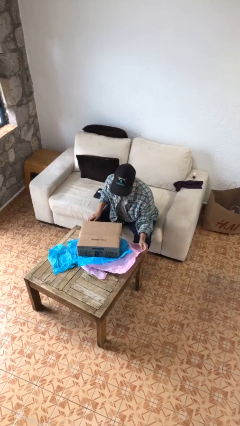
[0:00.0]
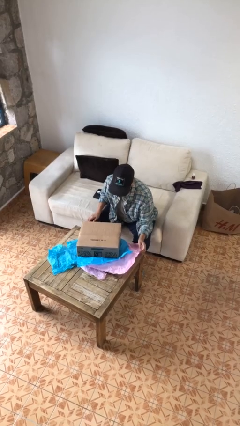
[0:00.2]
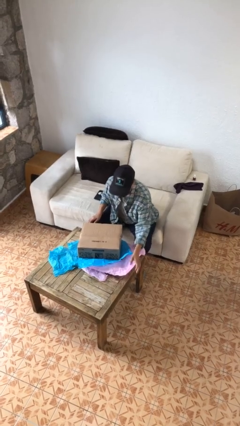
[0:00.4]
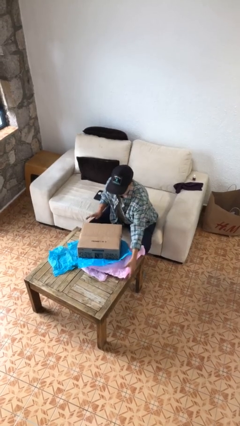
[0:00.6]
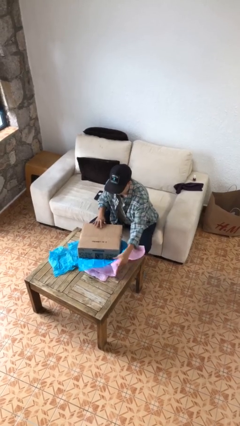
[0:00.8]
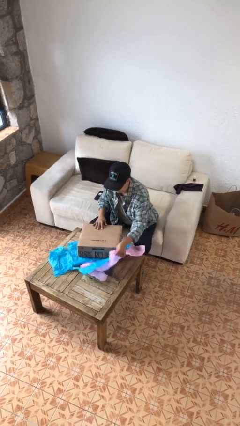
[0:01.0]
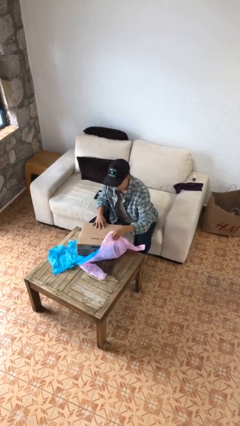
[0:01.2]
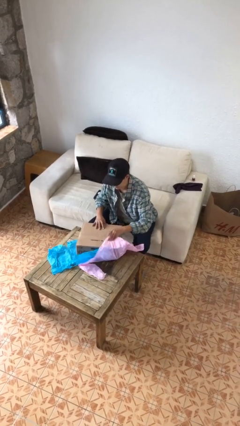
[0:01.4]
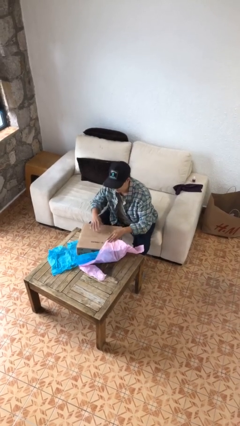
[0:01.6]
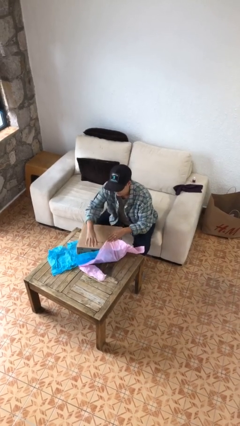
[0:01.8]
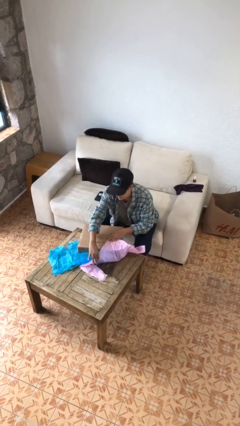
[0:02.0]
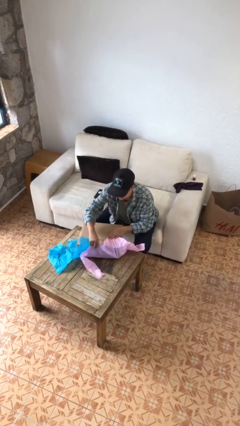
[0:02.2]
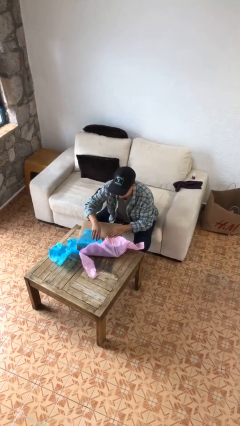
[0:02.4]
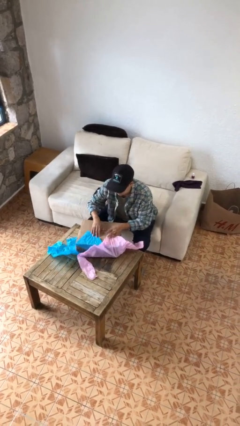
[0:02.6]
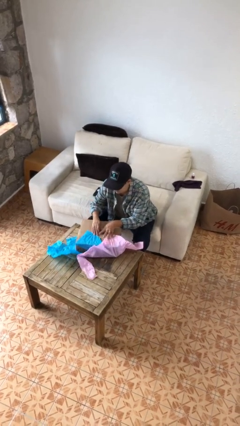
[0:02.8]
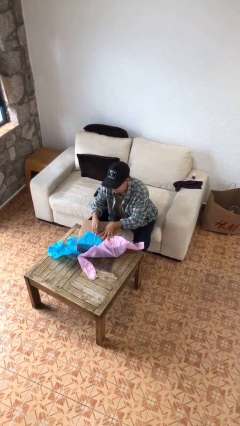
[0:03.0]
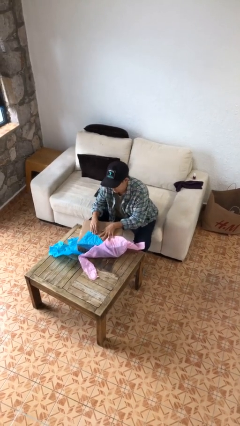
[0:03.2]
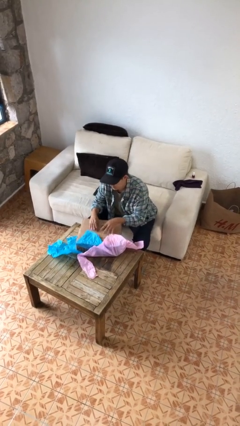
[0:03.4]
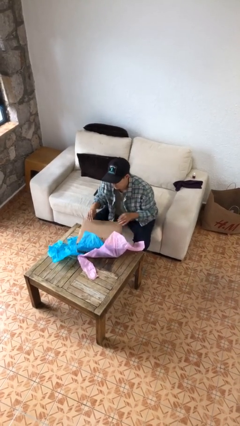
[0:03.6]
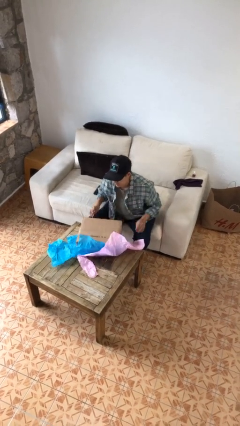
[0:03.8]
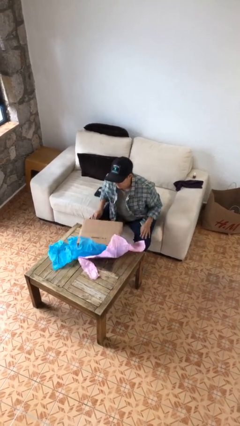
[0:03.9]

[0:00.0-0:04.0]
person wraps box

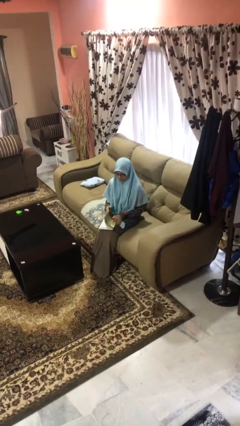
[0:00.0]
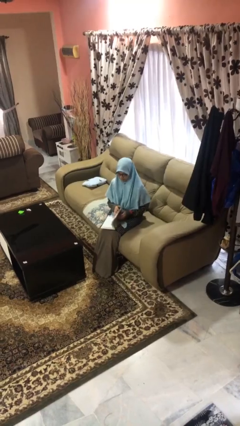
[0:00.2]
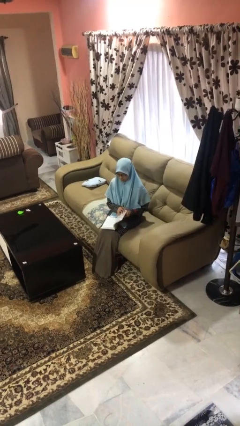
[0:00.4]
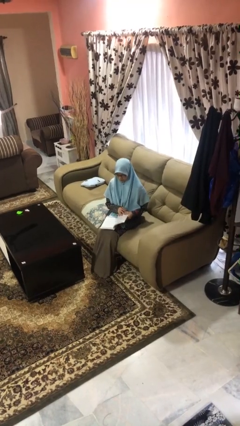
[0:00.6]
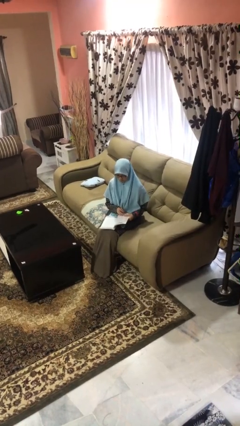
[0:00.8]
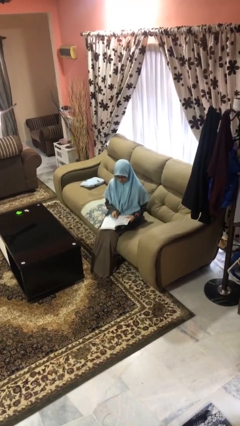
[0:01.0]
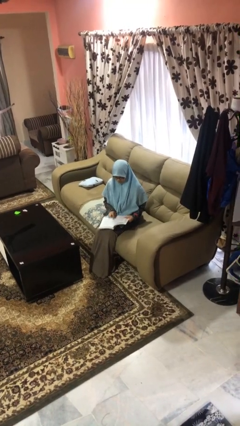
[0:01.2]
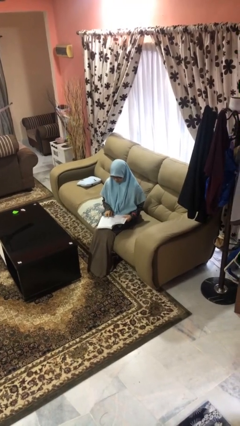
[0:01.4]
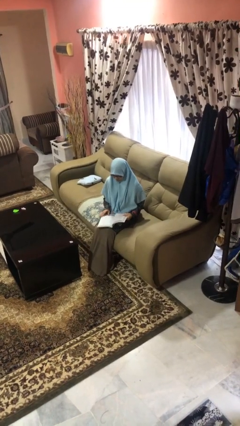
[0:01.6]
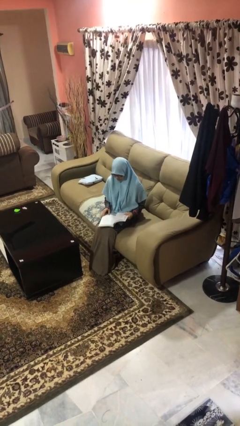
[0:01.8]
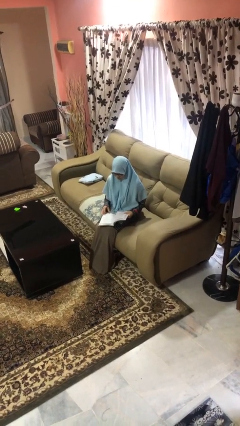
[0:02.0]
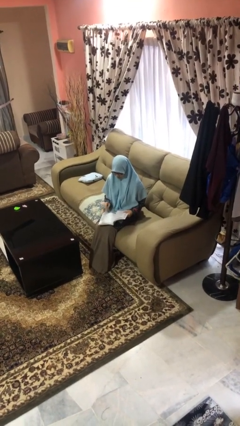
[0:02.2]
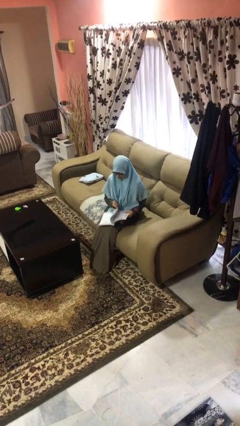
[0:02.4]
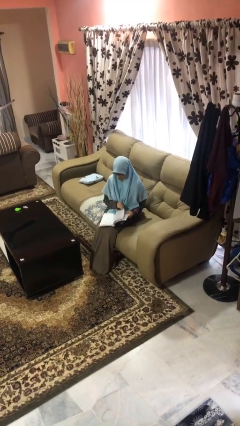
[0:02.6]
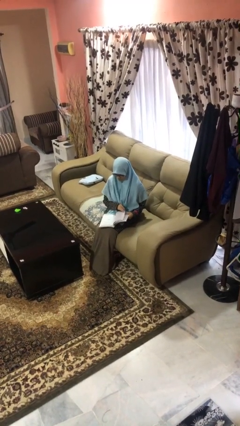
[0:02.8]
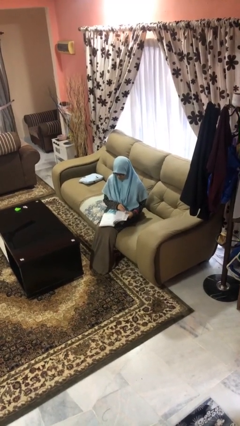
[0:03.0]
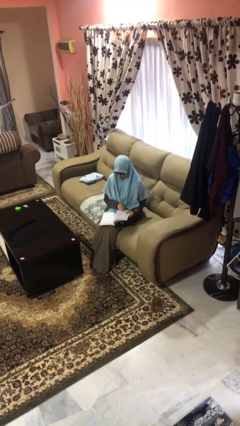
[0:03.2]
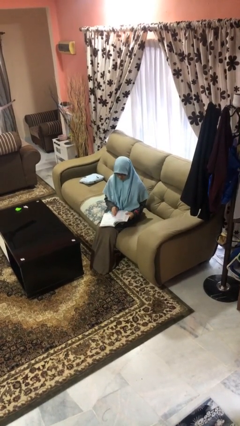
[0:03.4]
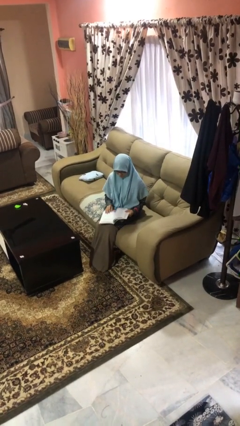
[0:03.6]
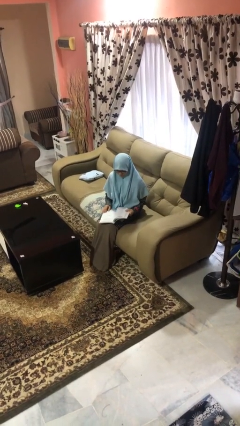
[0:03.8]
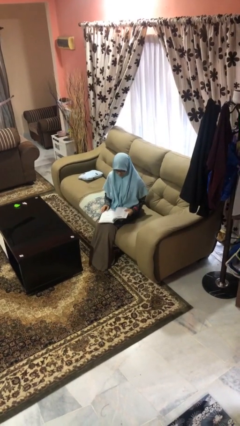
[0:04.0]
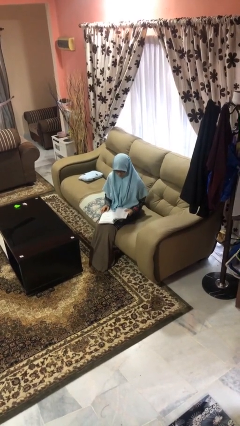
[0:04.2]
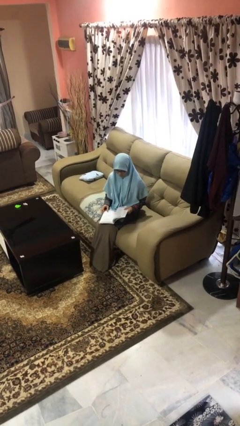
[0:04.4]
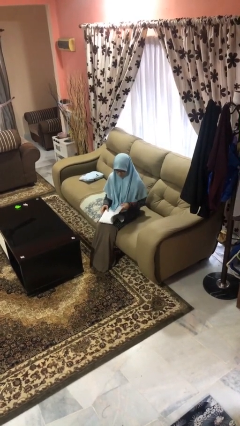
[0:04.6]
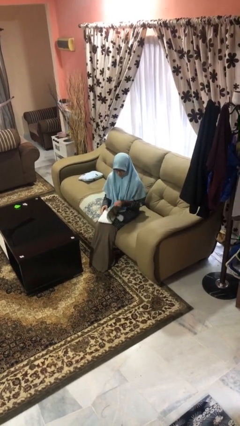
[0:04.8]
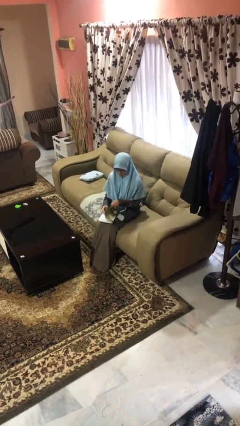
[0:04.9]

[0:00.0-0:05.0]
person reads magazine

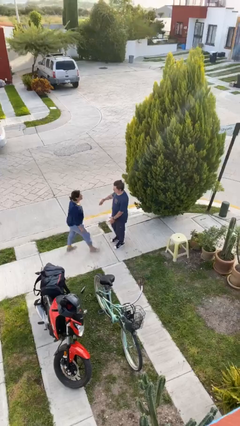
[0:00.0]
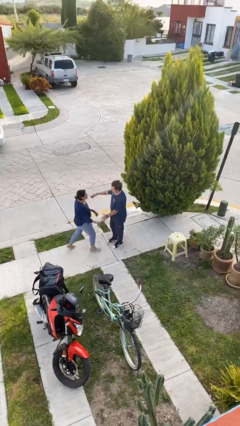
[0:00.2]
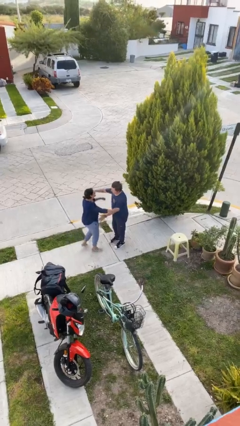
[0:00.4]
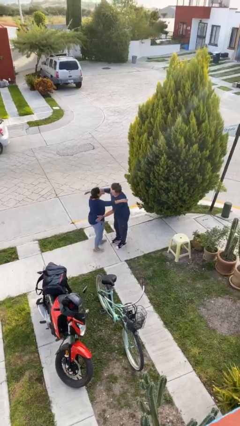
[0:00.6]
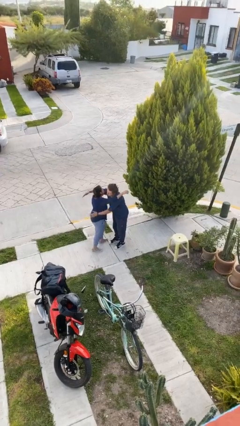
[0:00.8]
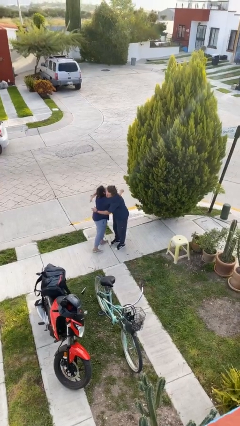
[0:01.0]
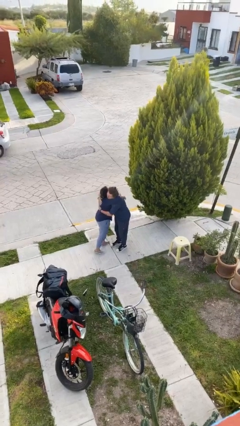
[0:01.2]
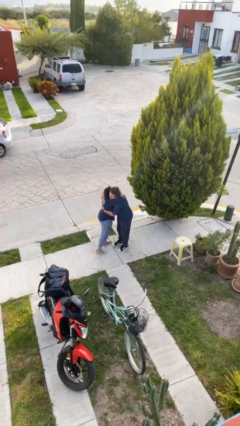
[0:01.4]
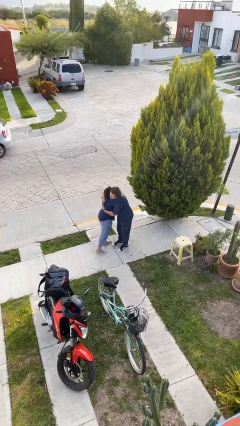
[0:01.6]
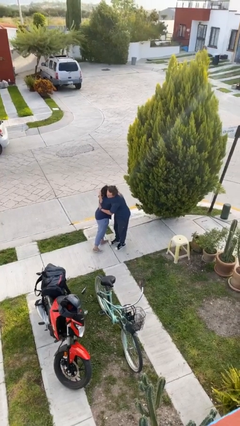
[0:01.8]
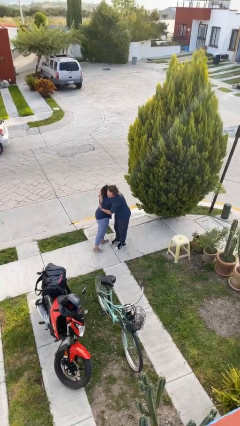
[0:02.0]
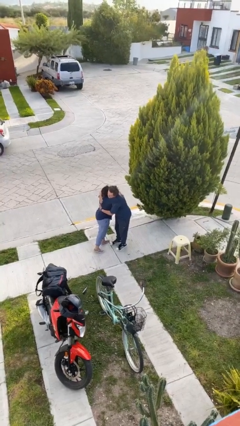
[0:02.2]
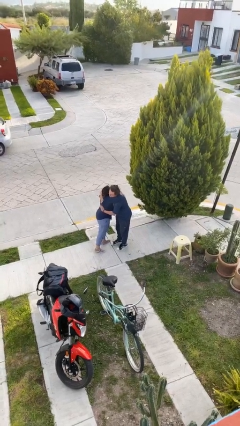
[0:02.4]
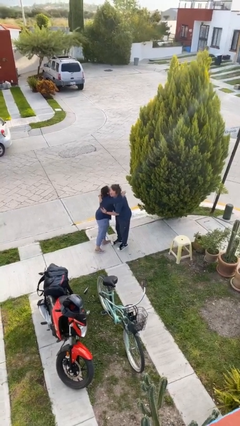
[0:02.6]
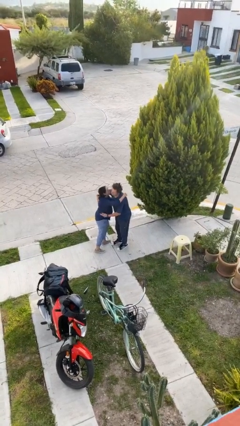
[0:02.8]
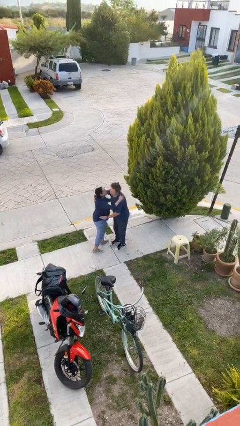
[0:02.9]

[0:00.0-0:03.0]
person embraces person

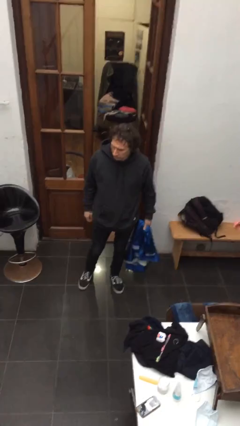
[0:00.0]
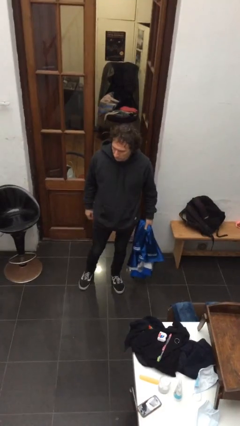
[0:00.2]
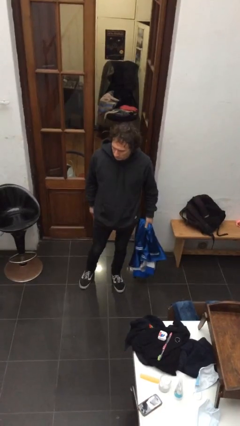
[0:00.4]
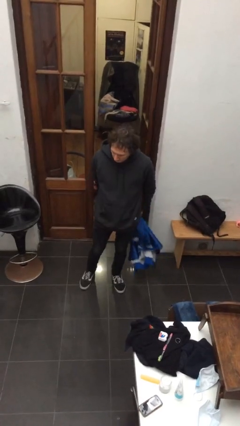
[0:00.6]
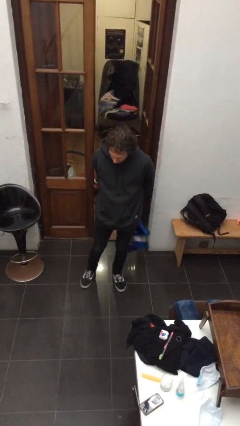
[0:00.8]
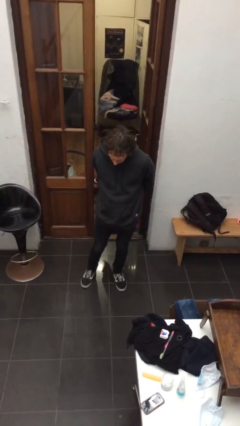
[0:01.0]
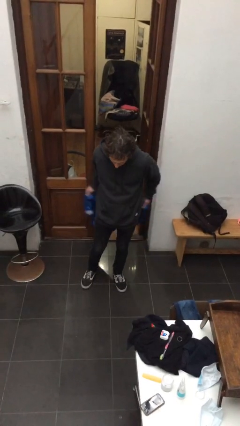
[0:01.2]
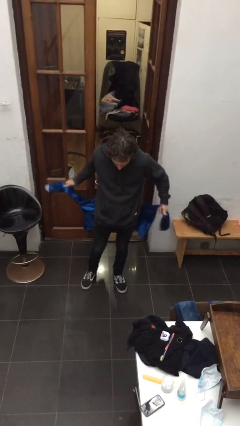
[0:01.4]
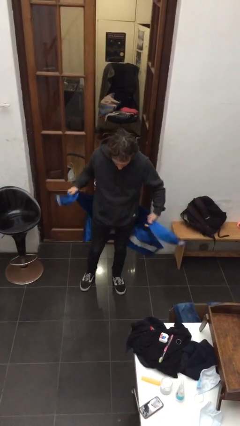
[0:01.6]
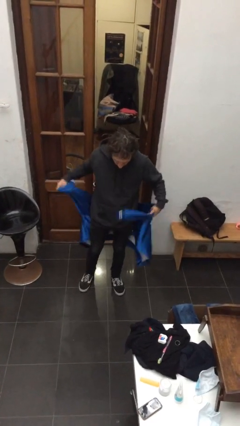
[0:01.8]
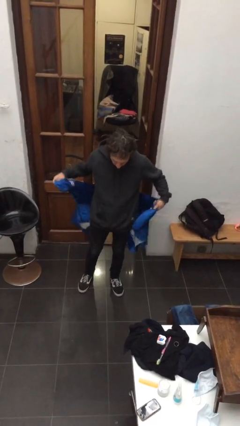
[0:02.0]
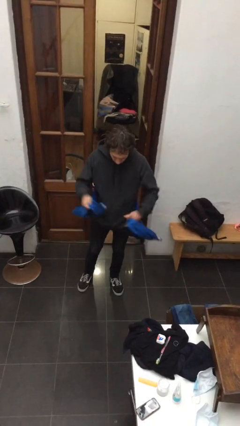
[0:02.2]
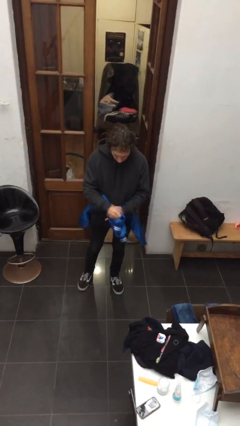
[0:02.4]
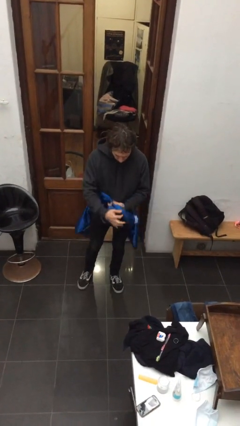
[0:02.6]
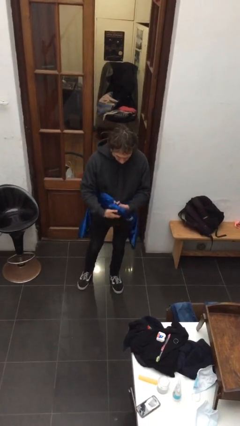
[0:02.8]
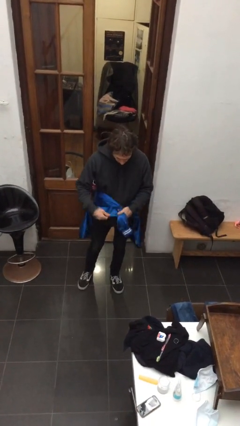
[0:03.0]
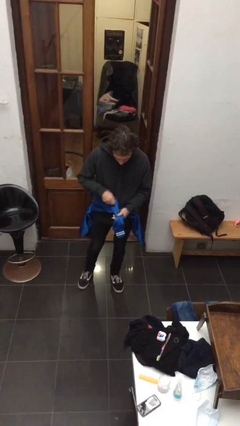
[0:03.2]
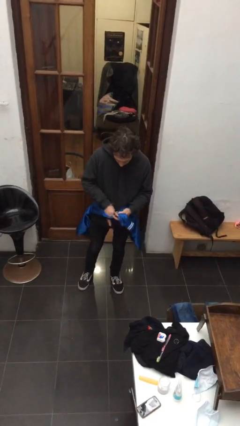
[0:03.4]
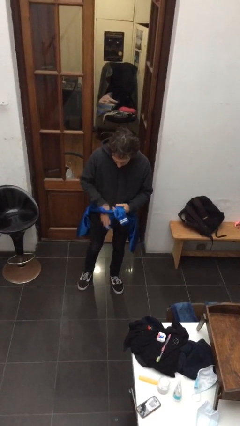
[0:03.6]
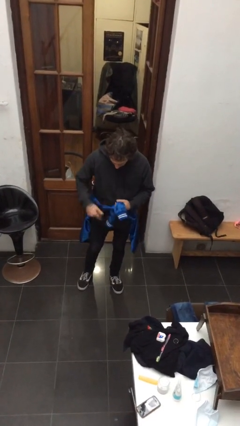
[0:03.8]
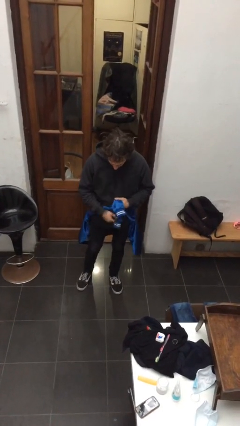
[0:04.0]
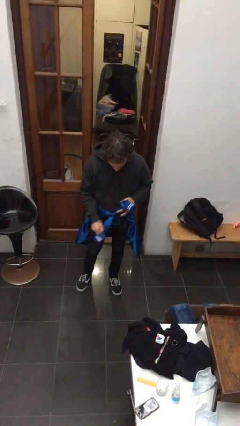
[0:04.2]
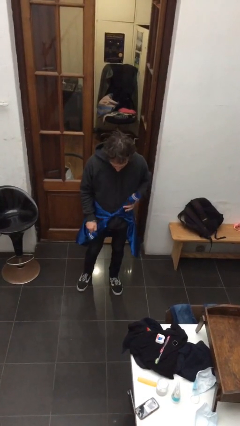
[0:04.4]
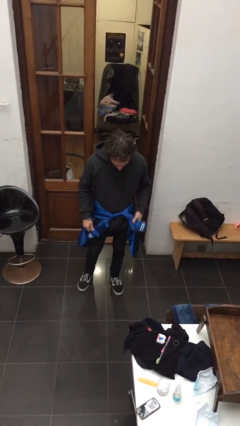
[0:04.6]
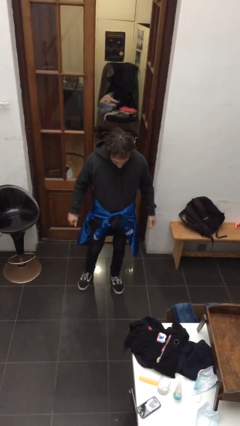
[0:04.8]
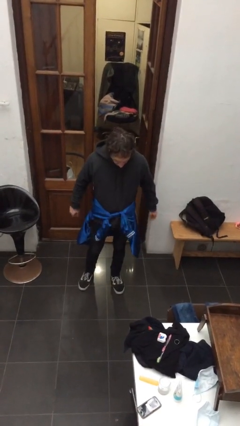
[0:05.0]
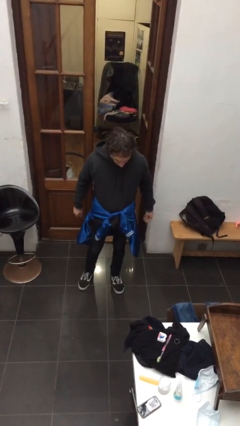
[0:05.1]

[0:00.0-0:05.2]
person ties jacket around waist

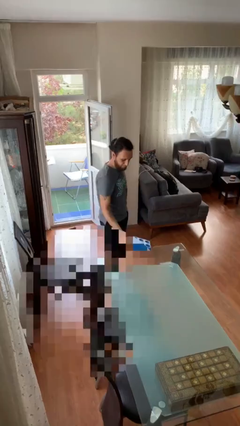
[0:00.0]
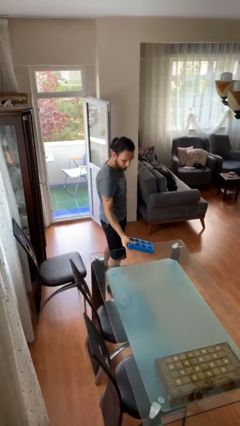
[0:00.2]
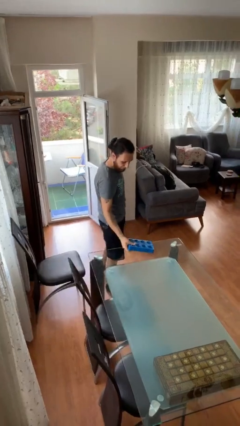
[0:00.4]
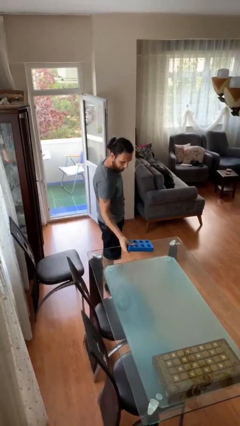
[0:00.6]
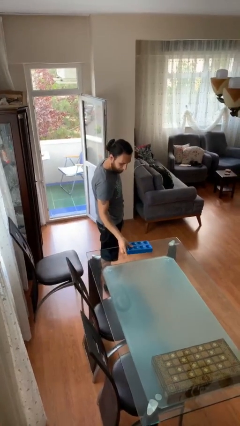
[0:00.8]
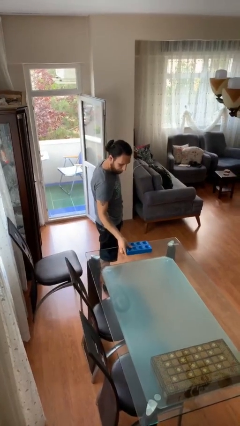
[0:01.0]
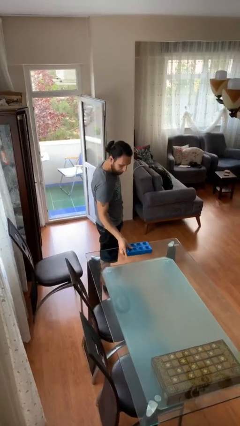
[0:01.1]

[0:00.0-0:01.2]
person puts down object on table
